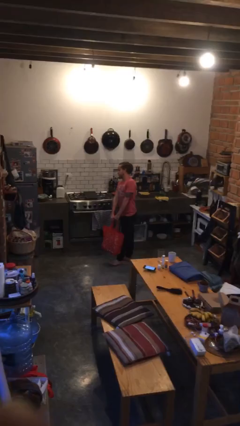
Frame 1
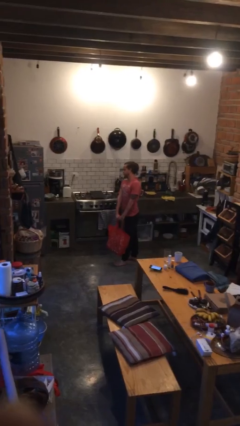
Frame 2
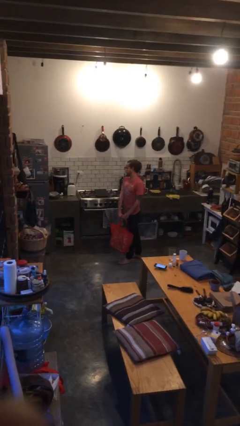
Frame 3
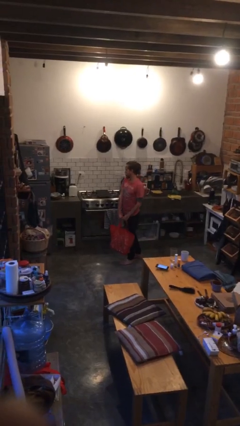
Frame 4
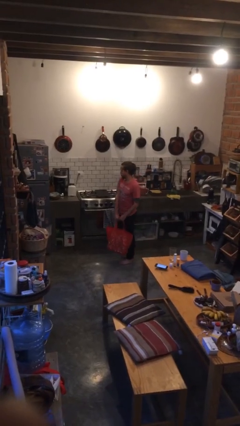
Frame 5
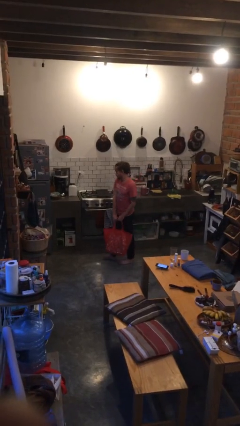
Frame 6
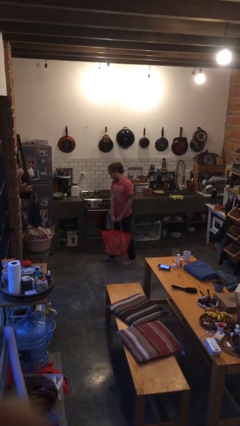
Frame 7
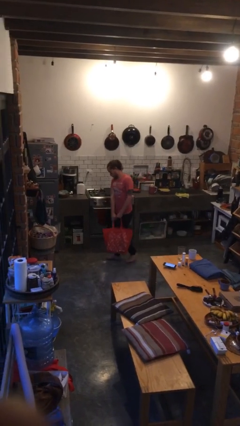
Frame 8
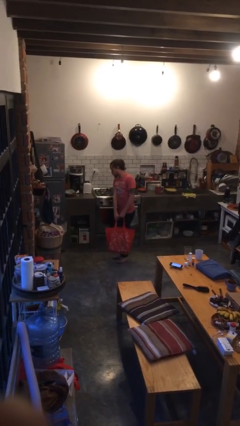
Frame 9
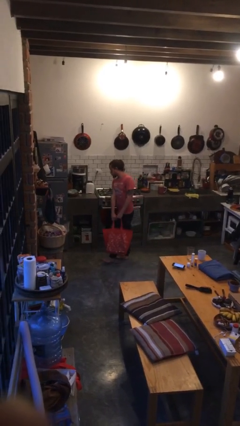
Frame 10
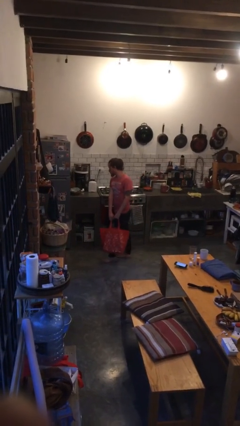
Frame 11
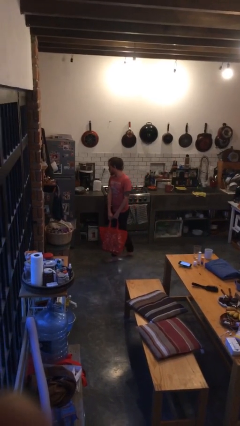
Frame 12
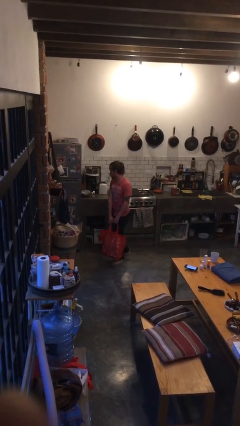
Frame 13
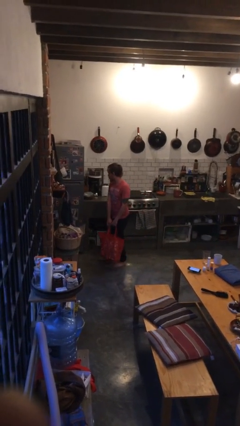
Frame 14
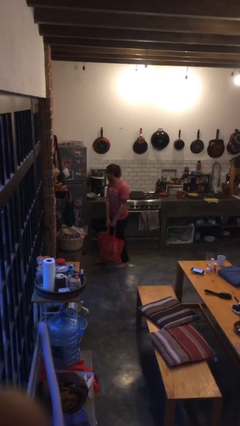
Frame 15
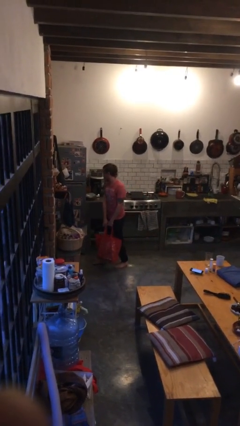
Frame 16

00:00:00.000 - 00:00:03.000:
person carries groceries

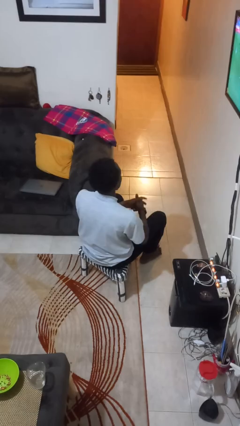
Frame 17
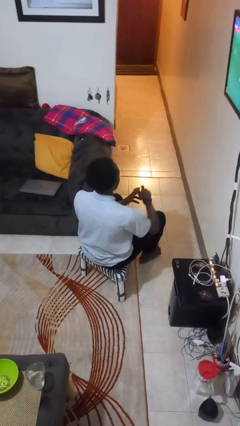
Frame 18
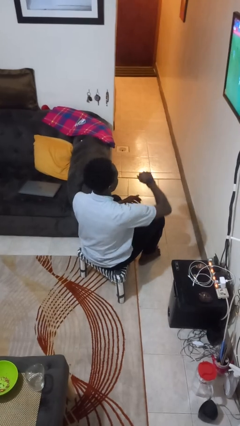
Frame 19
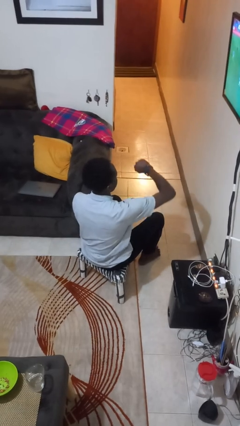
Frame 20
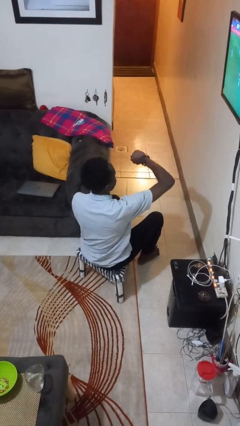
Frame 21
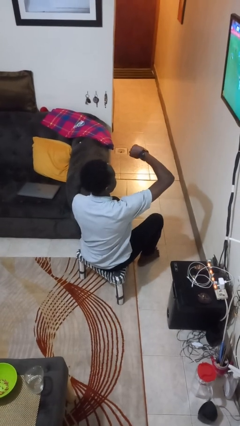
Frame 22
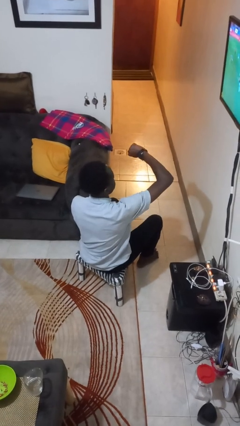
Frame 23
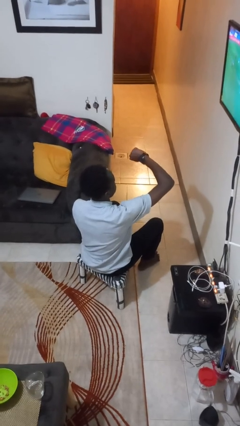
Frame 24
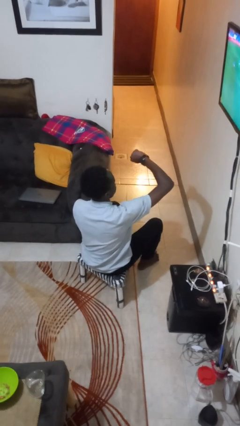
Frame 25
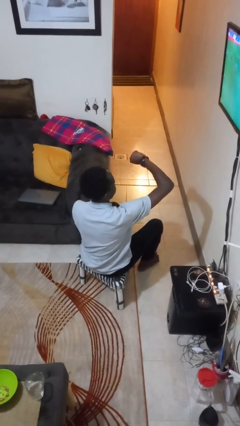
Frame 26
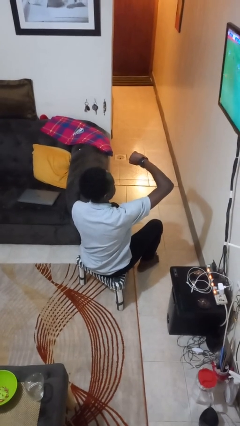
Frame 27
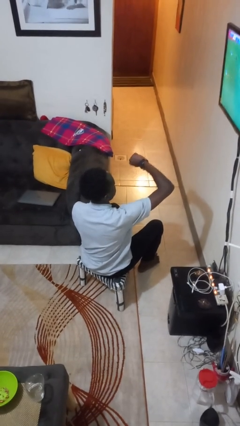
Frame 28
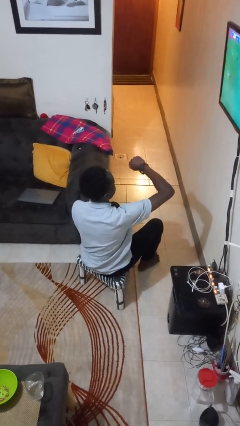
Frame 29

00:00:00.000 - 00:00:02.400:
person looks at wristwatch

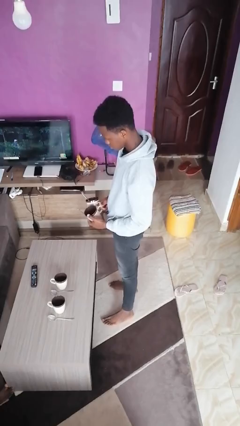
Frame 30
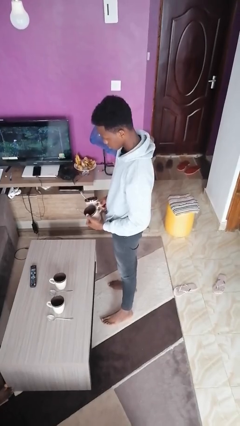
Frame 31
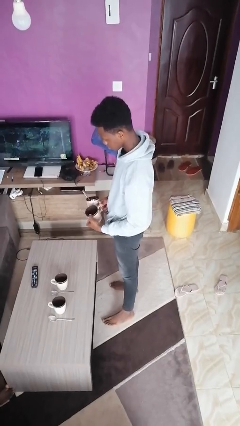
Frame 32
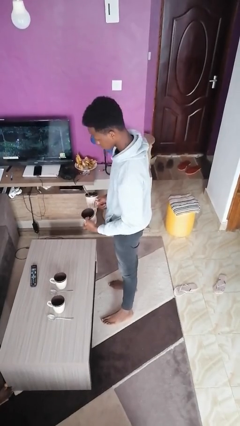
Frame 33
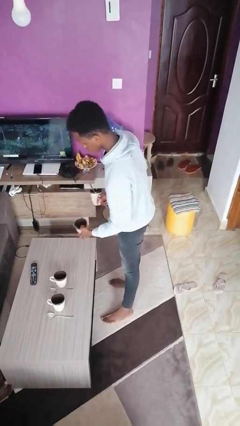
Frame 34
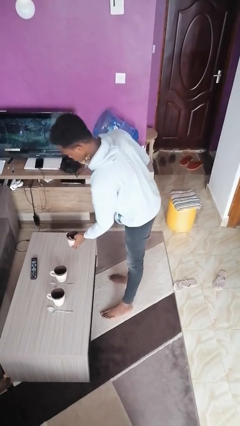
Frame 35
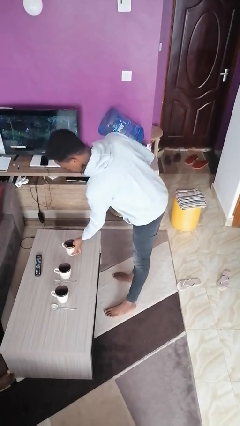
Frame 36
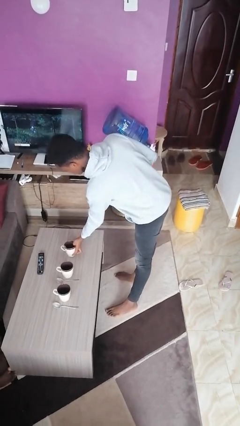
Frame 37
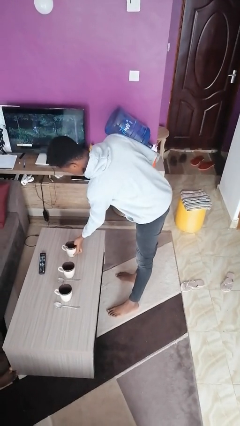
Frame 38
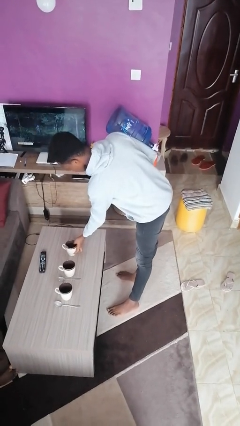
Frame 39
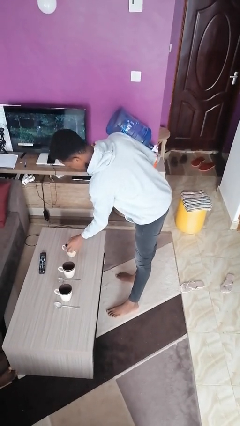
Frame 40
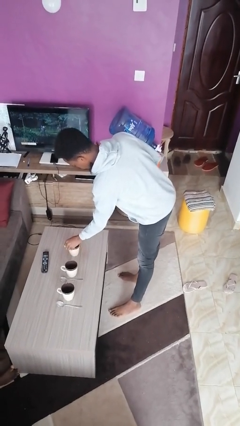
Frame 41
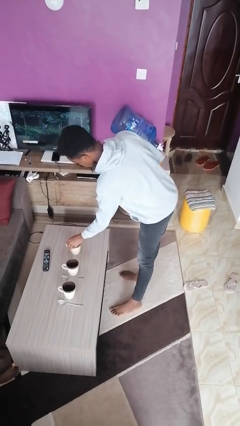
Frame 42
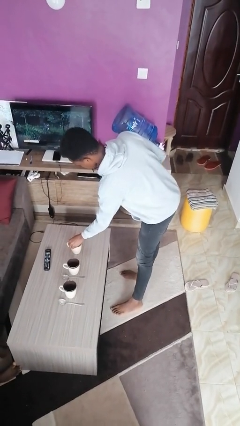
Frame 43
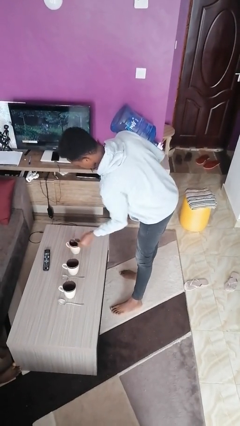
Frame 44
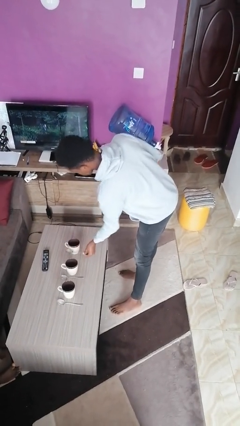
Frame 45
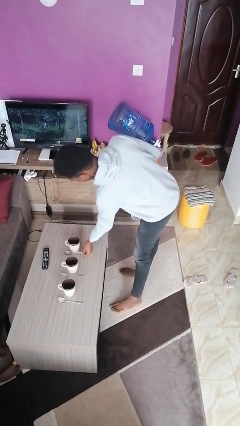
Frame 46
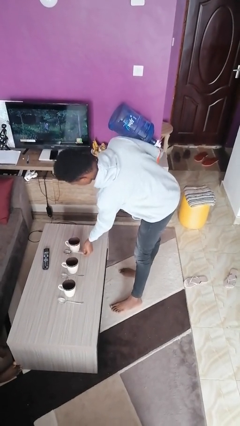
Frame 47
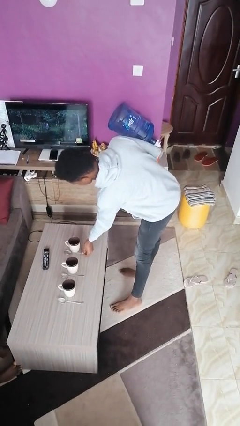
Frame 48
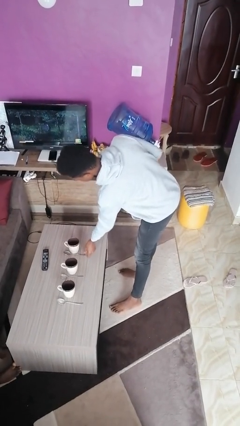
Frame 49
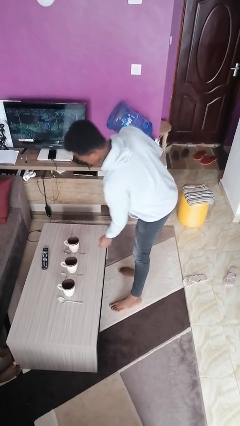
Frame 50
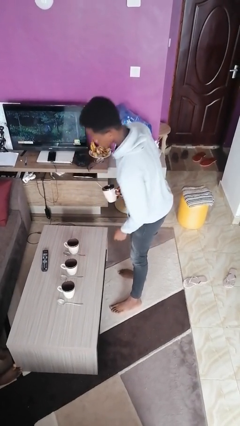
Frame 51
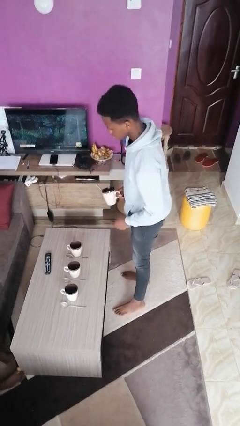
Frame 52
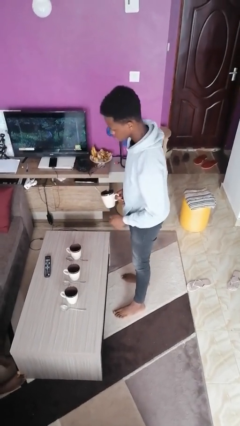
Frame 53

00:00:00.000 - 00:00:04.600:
person sets table

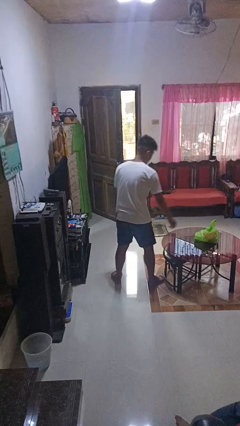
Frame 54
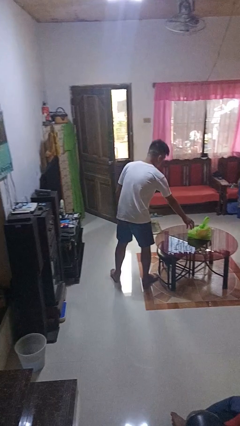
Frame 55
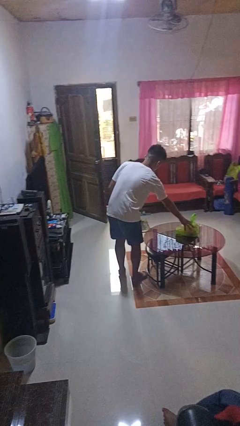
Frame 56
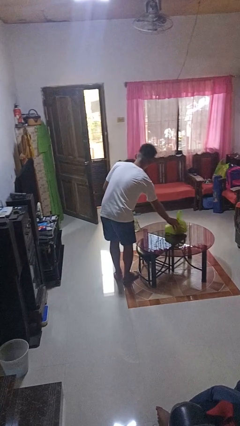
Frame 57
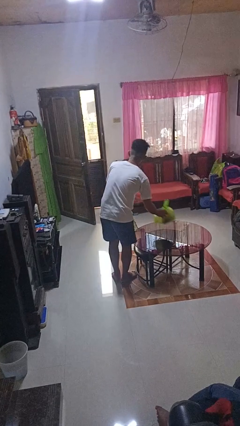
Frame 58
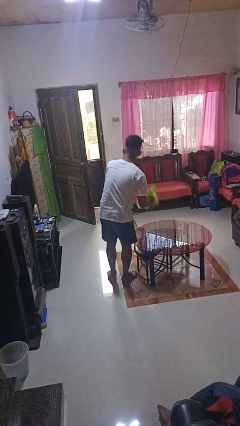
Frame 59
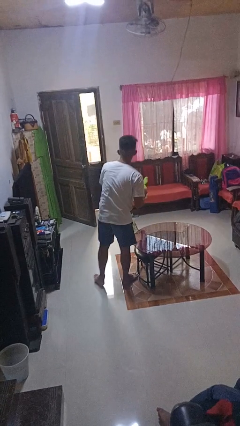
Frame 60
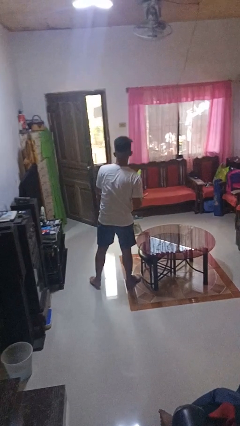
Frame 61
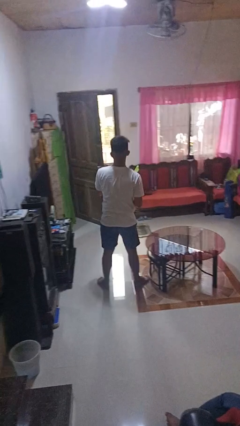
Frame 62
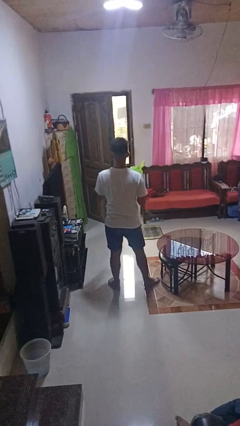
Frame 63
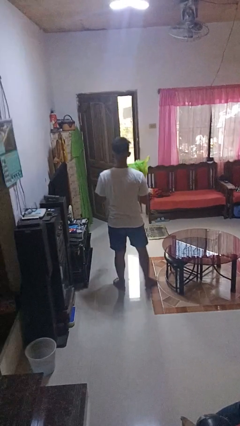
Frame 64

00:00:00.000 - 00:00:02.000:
person picks up object from table

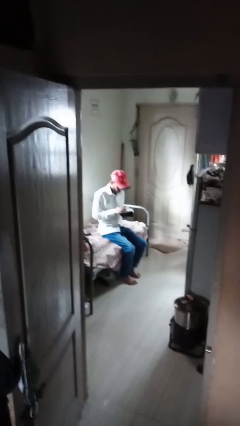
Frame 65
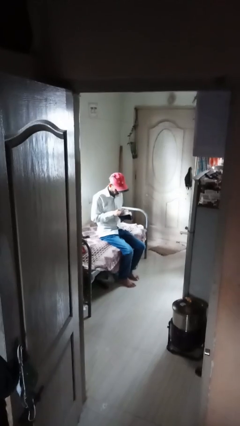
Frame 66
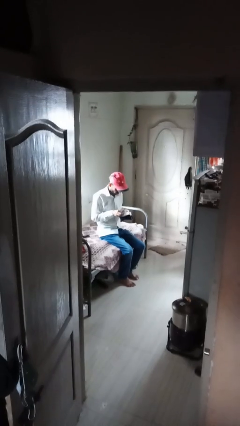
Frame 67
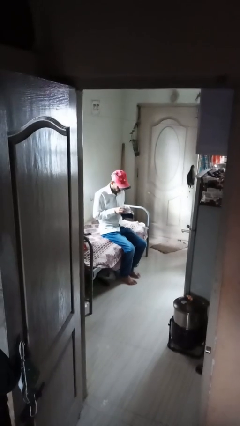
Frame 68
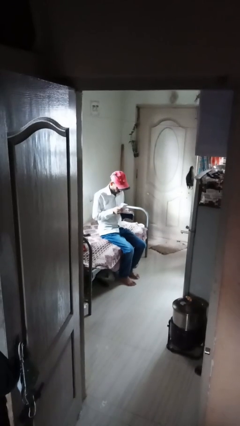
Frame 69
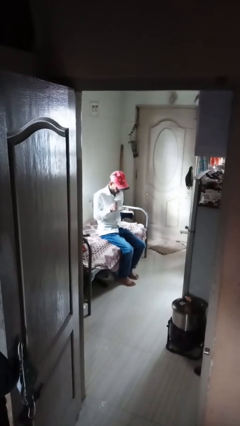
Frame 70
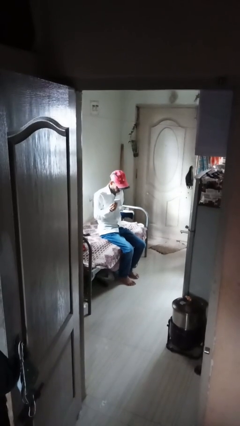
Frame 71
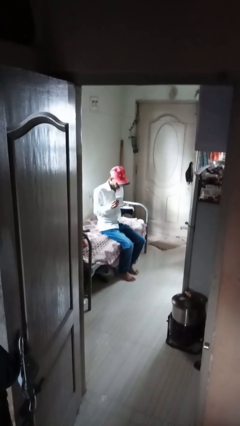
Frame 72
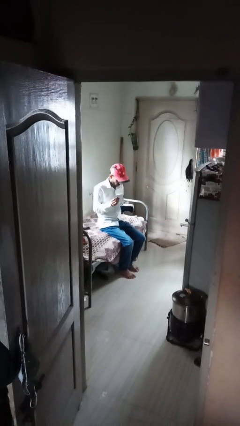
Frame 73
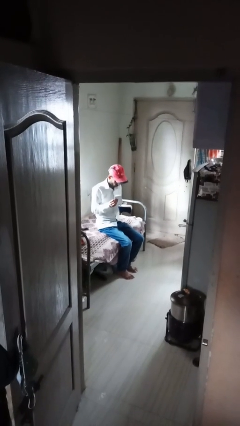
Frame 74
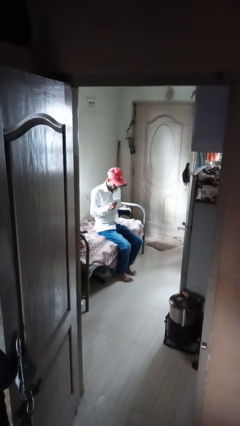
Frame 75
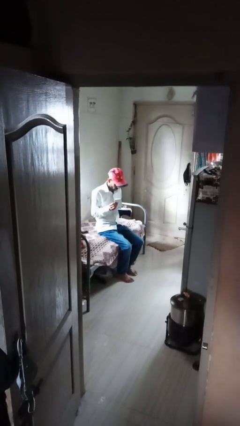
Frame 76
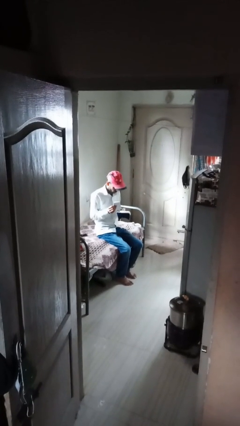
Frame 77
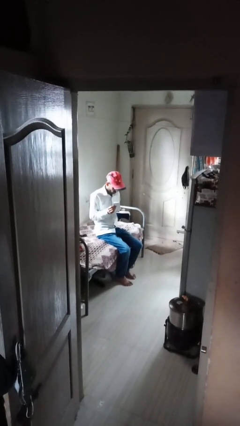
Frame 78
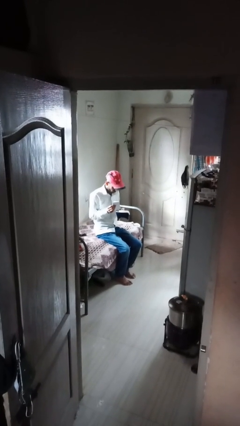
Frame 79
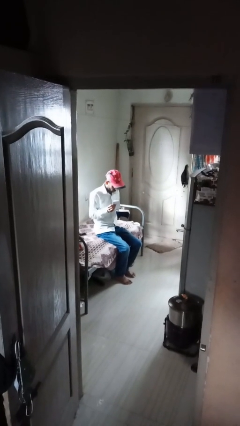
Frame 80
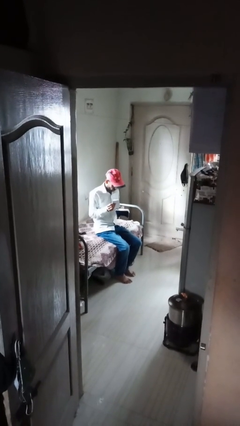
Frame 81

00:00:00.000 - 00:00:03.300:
person takes object from purse

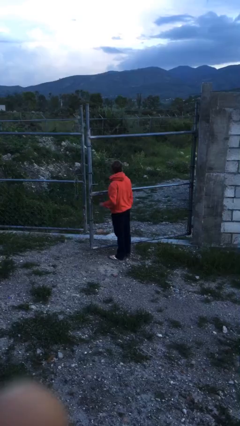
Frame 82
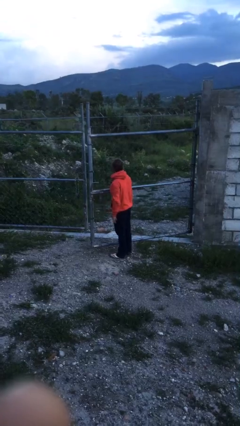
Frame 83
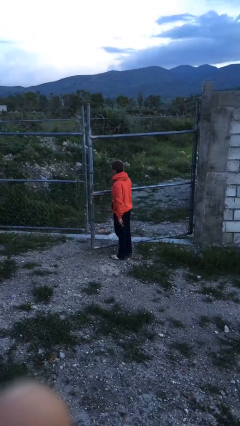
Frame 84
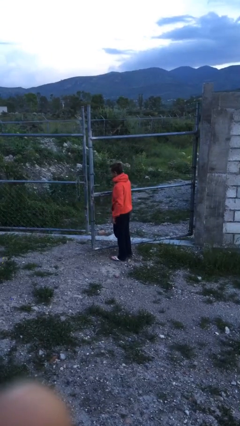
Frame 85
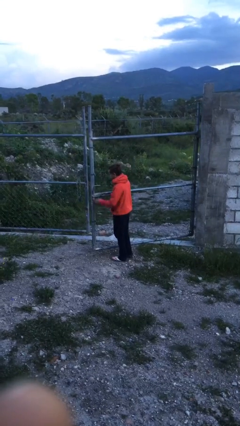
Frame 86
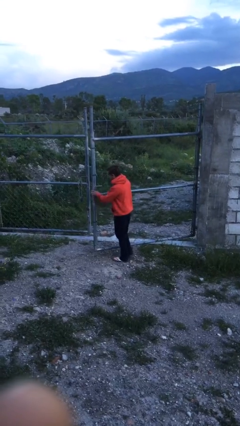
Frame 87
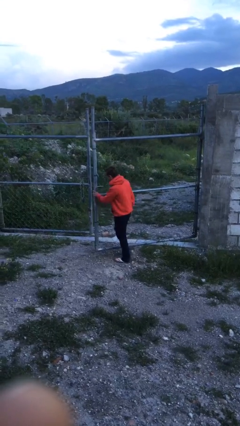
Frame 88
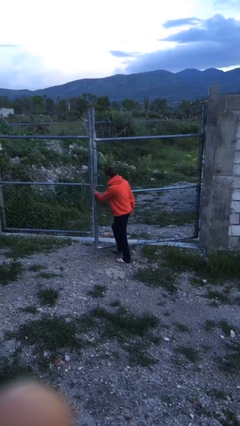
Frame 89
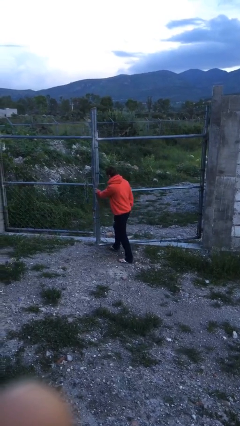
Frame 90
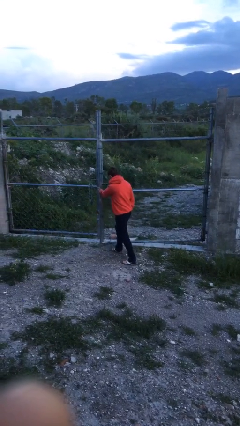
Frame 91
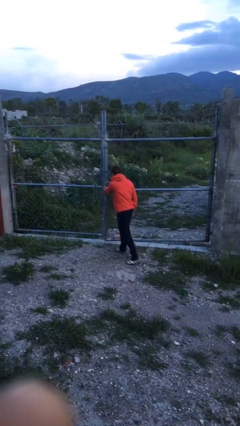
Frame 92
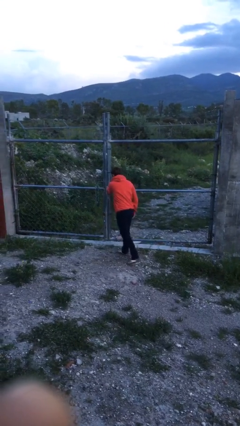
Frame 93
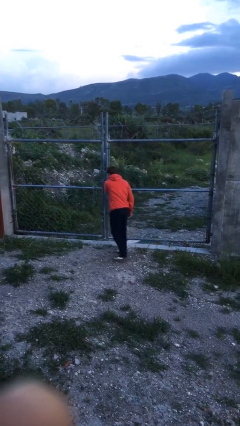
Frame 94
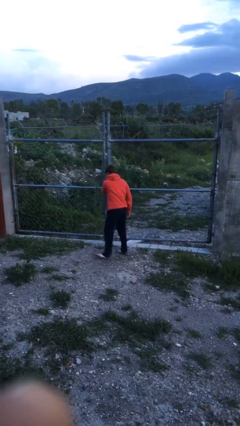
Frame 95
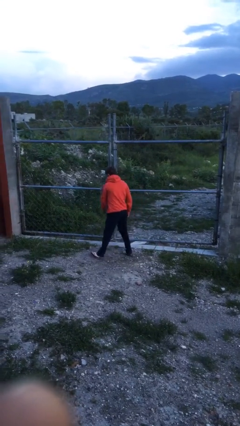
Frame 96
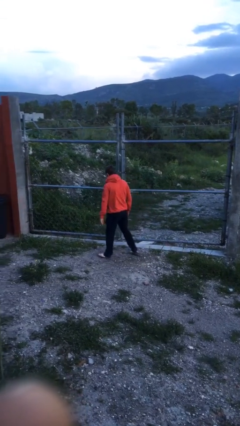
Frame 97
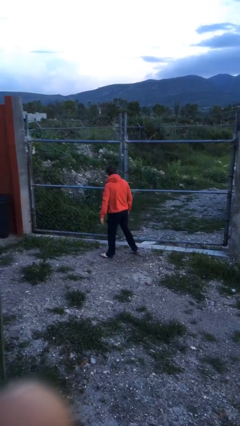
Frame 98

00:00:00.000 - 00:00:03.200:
person closes gate
